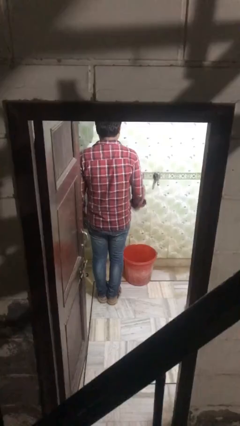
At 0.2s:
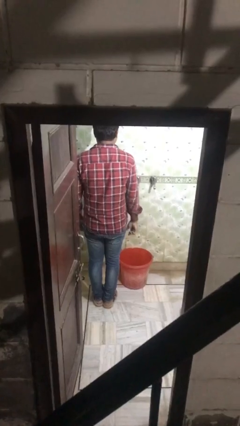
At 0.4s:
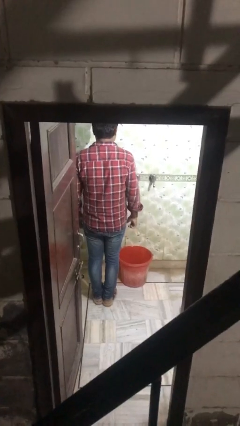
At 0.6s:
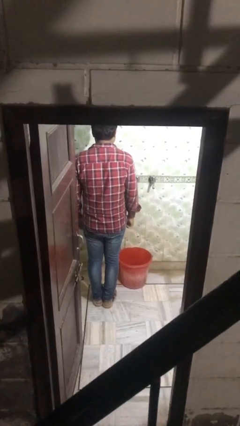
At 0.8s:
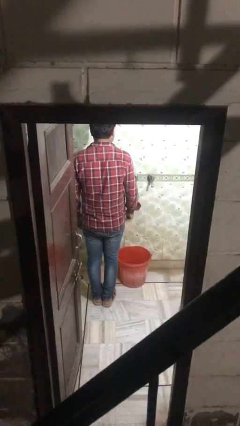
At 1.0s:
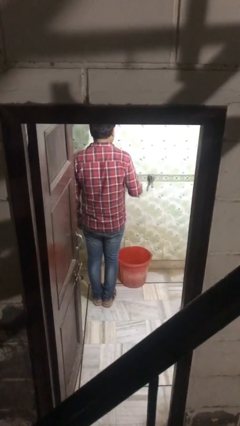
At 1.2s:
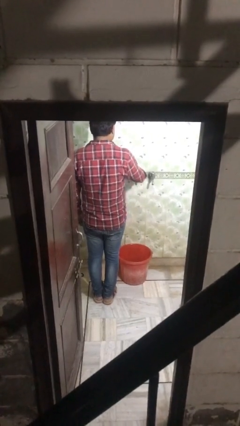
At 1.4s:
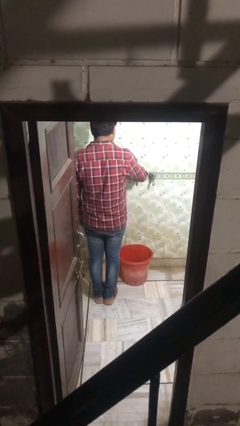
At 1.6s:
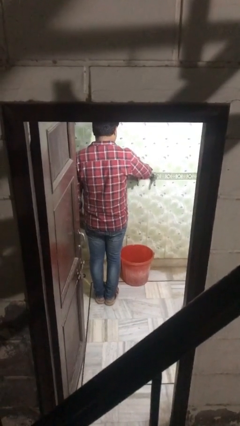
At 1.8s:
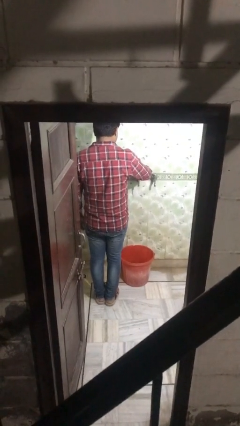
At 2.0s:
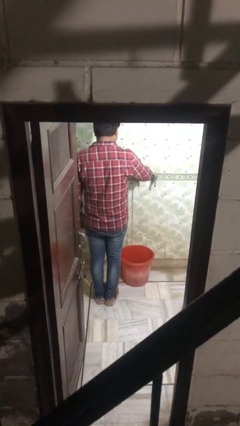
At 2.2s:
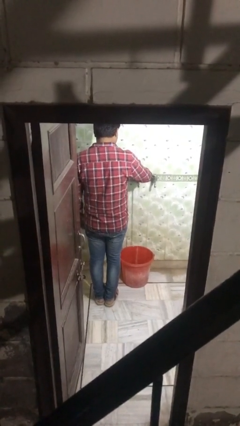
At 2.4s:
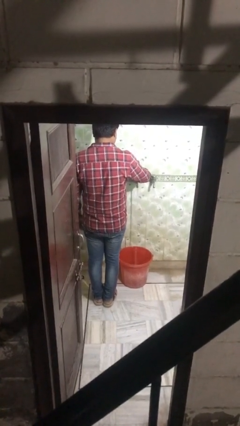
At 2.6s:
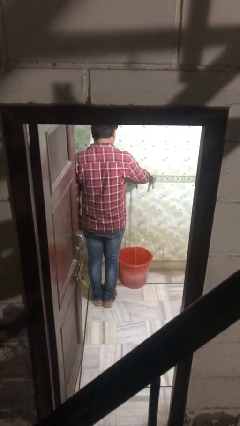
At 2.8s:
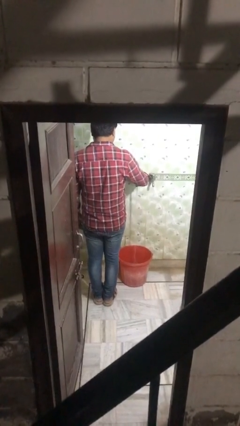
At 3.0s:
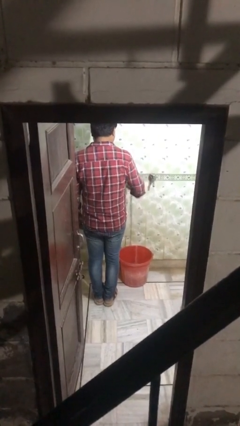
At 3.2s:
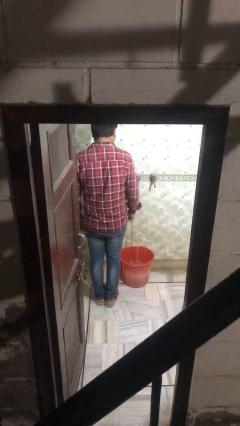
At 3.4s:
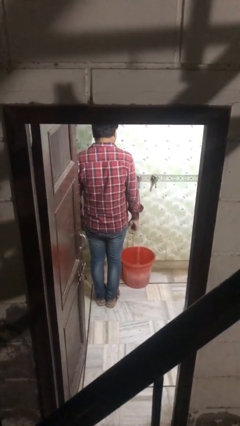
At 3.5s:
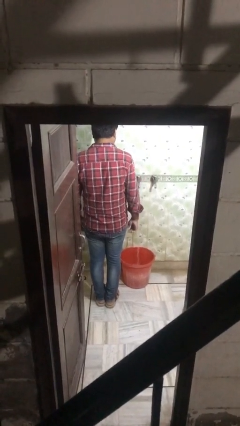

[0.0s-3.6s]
person turns on faucet

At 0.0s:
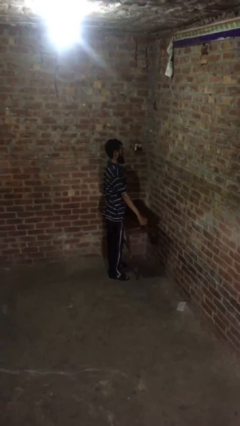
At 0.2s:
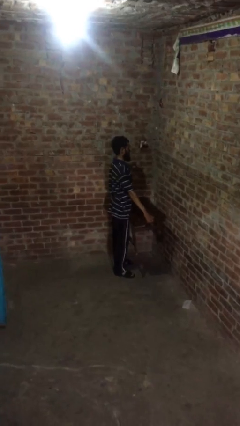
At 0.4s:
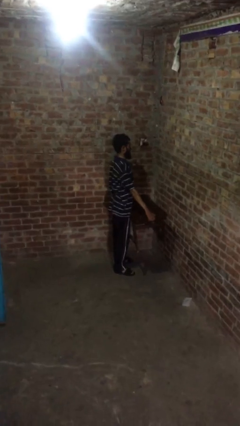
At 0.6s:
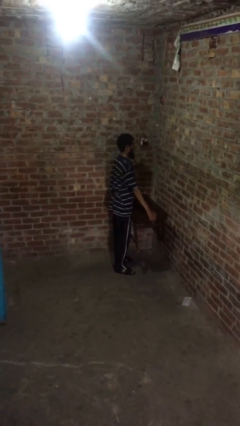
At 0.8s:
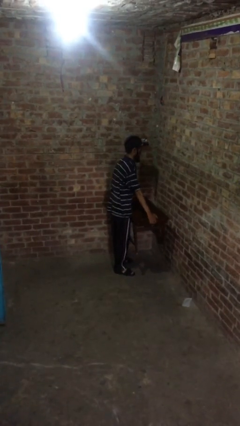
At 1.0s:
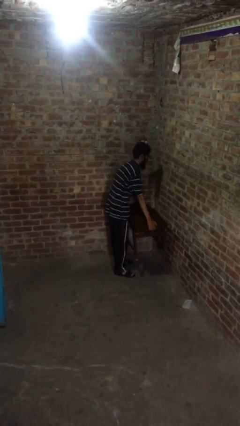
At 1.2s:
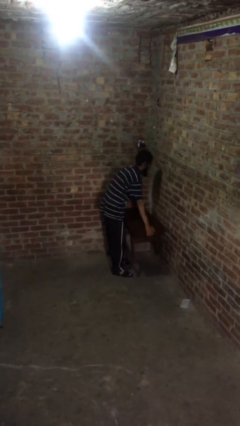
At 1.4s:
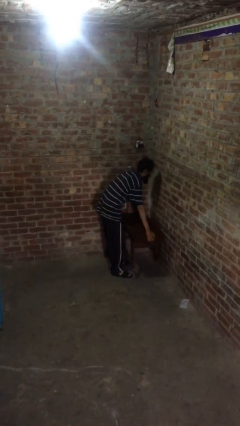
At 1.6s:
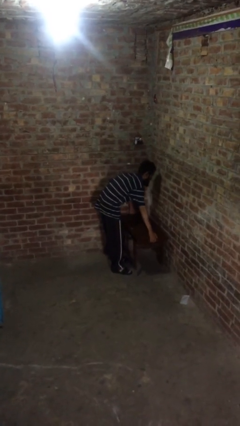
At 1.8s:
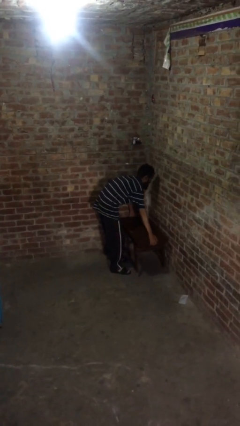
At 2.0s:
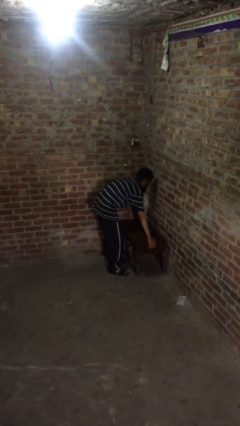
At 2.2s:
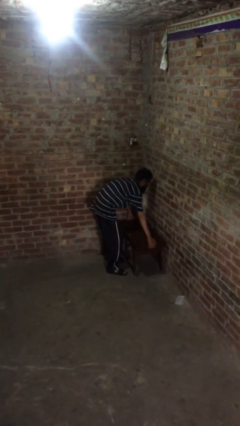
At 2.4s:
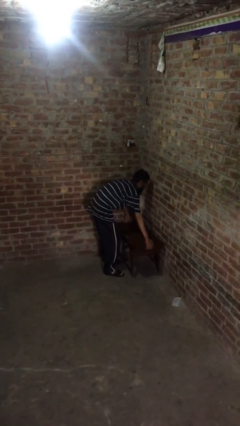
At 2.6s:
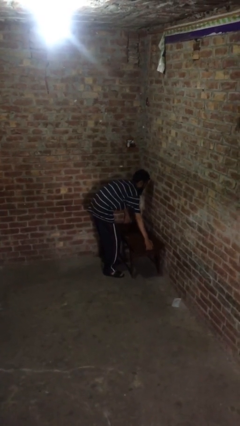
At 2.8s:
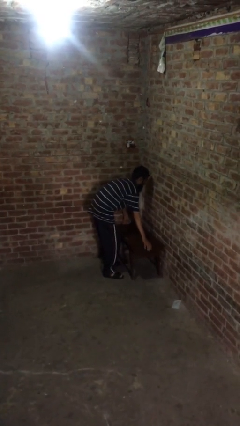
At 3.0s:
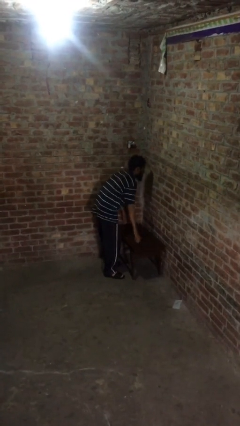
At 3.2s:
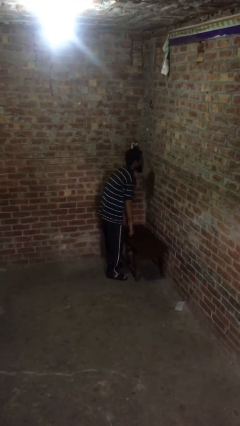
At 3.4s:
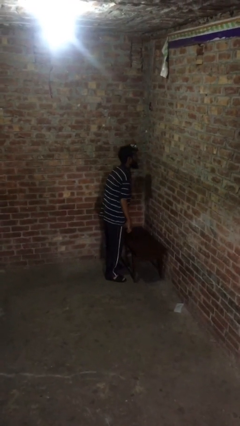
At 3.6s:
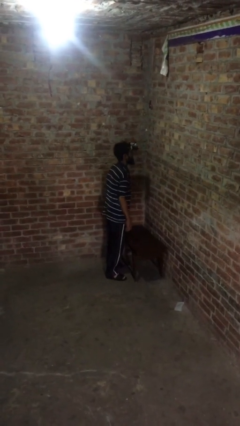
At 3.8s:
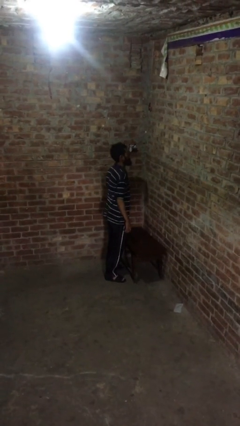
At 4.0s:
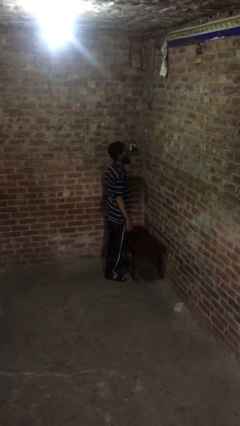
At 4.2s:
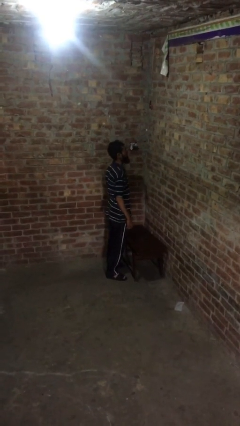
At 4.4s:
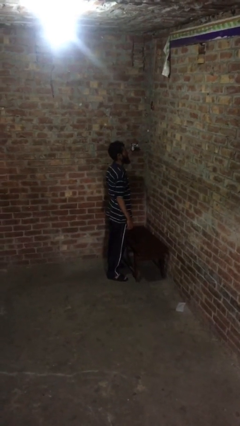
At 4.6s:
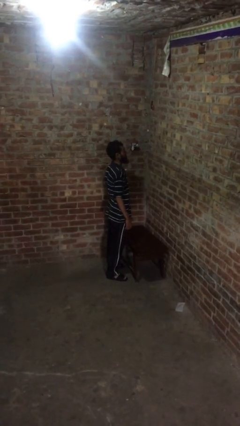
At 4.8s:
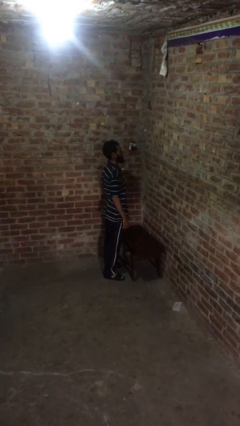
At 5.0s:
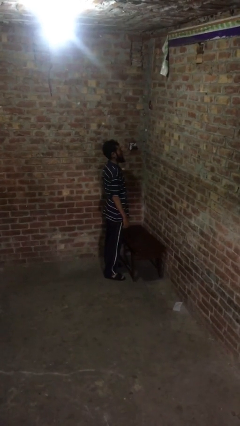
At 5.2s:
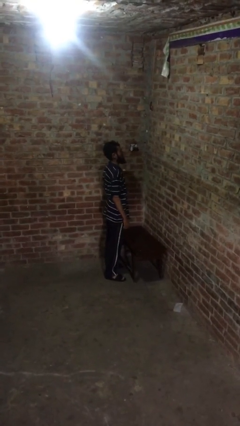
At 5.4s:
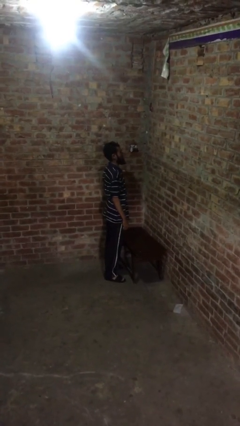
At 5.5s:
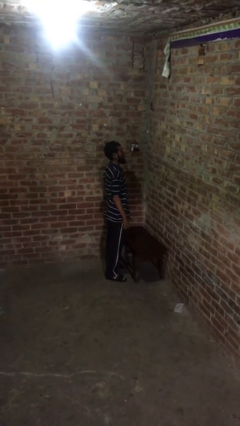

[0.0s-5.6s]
person puts down object on floor

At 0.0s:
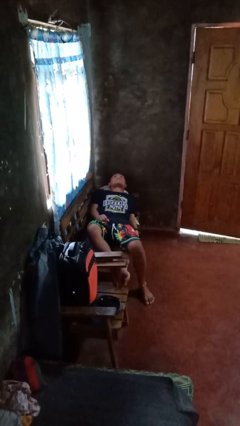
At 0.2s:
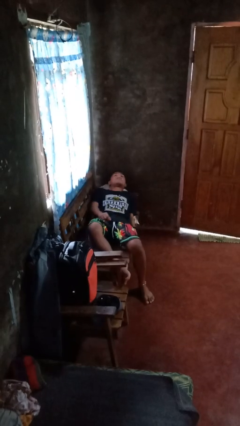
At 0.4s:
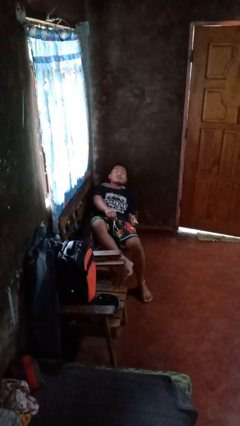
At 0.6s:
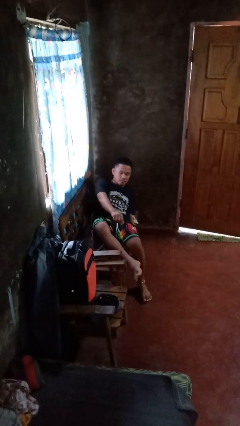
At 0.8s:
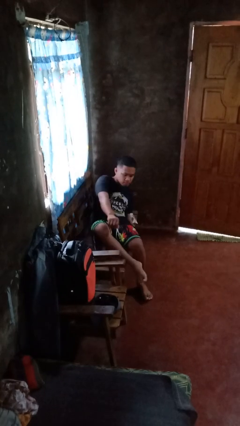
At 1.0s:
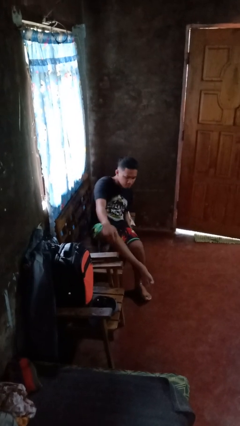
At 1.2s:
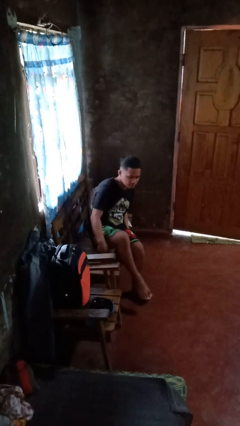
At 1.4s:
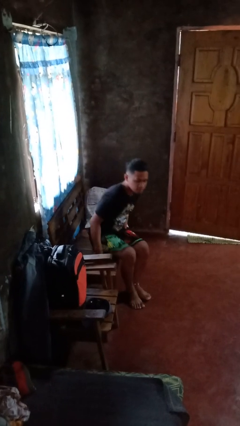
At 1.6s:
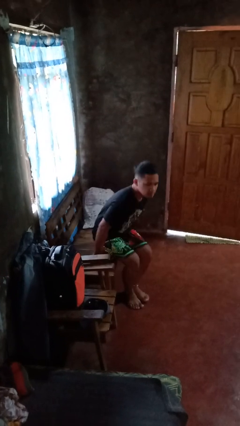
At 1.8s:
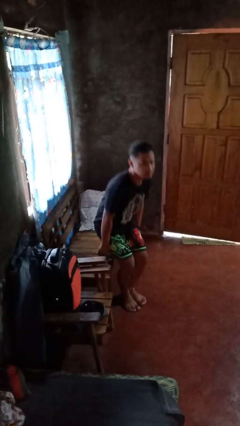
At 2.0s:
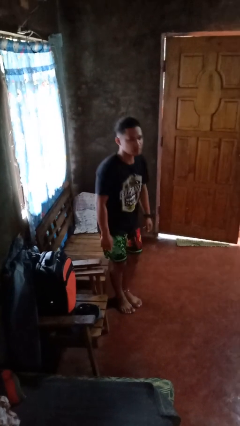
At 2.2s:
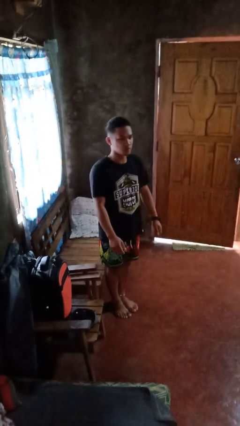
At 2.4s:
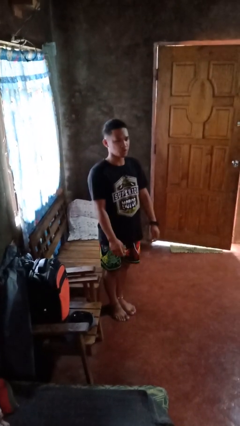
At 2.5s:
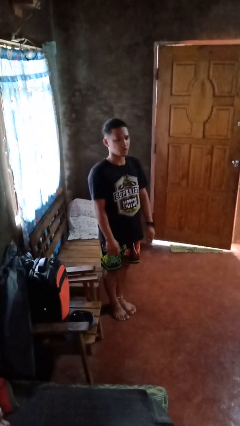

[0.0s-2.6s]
person stands up

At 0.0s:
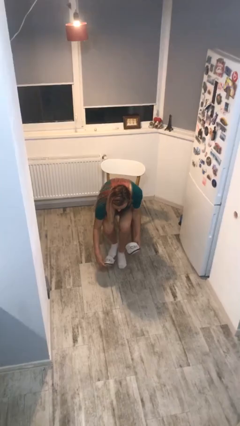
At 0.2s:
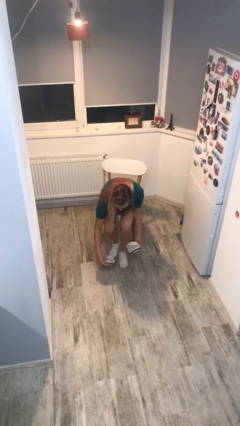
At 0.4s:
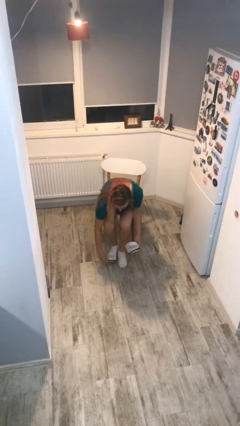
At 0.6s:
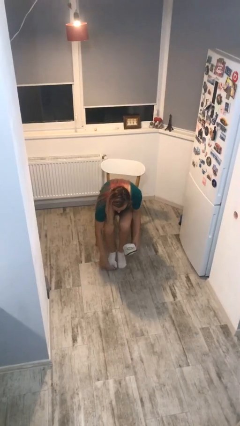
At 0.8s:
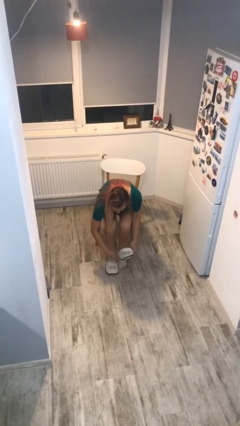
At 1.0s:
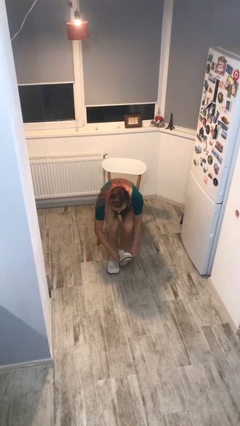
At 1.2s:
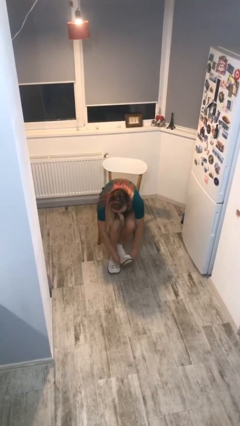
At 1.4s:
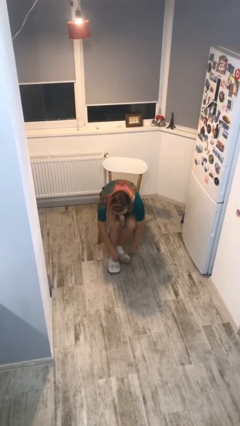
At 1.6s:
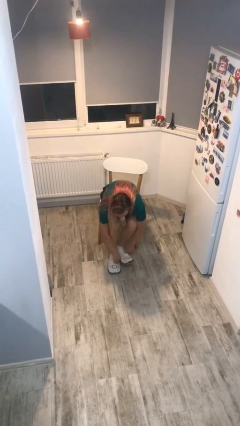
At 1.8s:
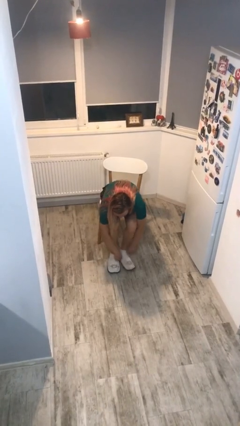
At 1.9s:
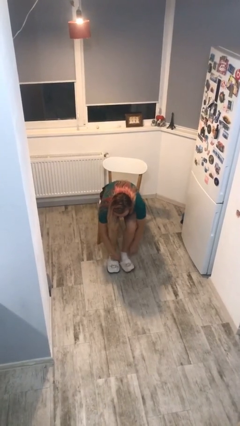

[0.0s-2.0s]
person puts on shoes

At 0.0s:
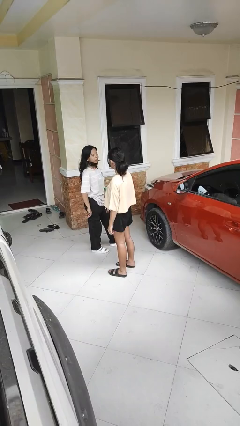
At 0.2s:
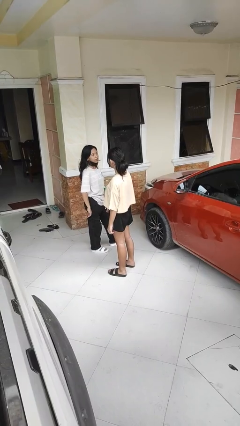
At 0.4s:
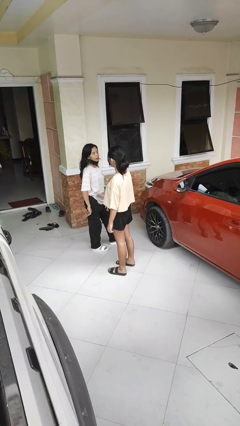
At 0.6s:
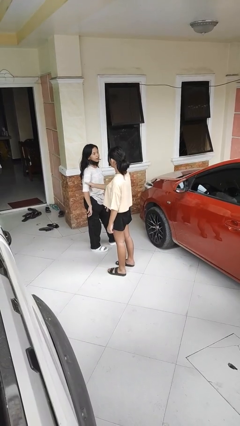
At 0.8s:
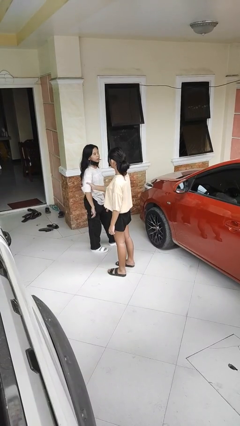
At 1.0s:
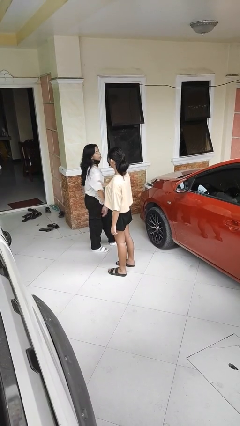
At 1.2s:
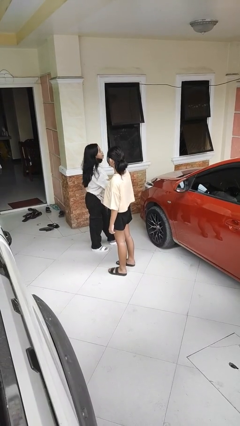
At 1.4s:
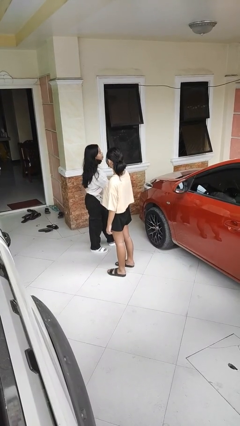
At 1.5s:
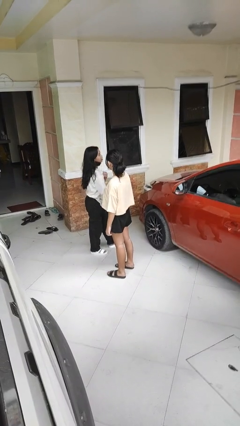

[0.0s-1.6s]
person grabs person by bicep

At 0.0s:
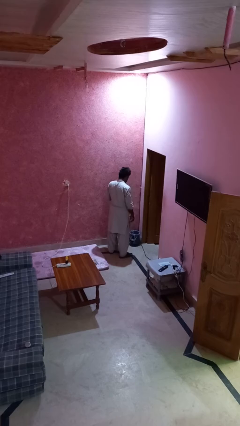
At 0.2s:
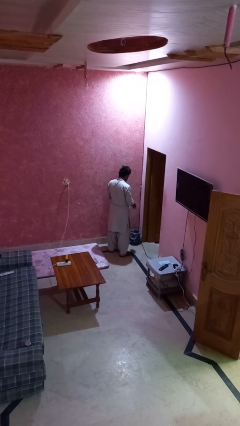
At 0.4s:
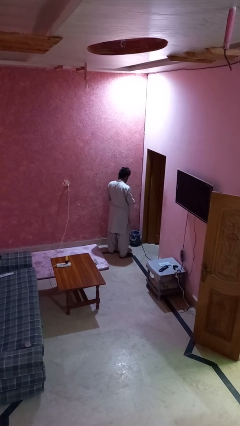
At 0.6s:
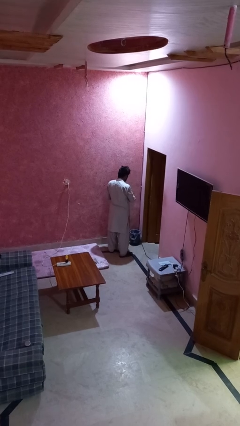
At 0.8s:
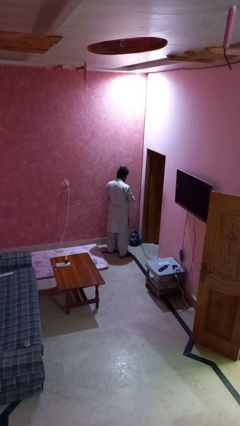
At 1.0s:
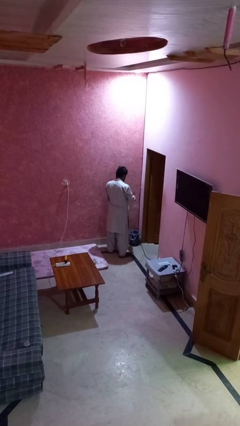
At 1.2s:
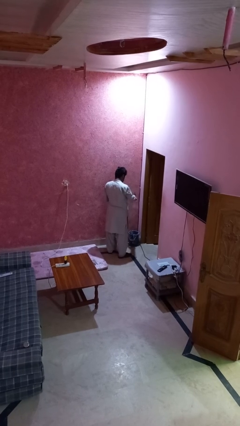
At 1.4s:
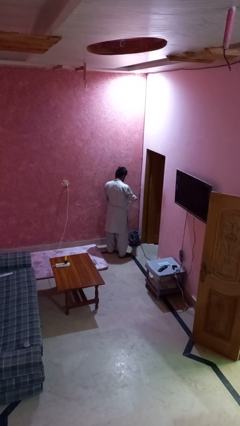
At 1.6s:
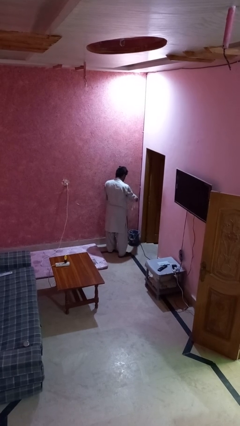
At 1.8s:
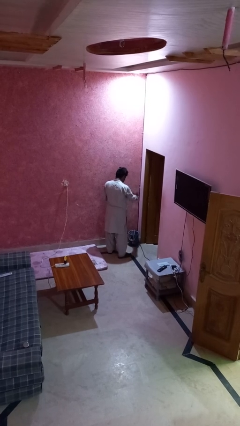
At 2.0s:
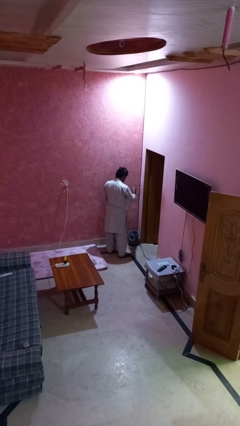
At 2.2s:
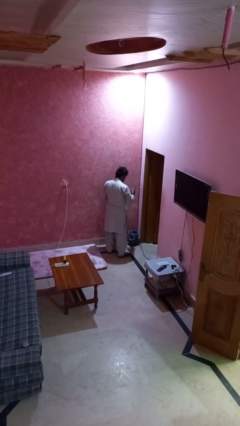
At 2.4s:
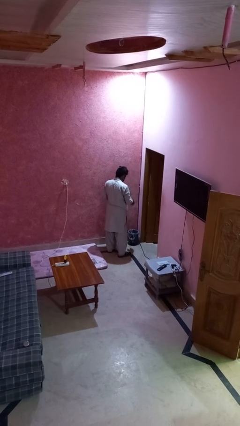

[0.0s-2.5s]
person discards trash
